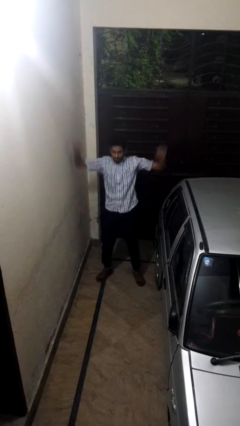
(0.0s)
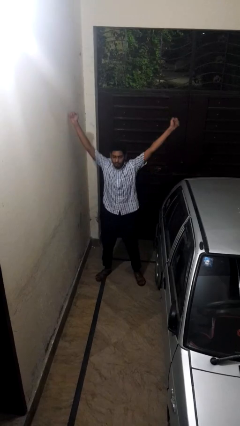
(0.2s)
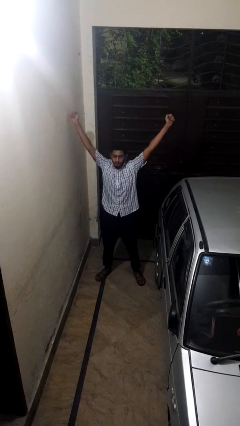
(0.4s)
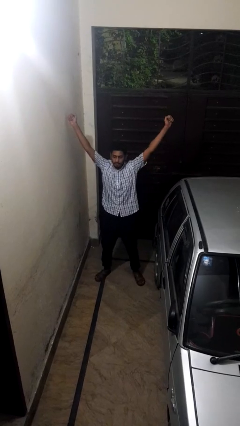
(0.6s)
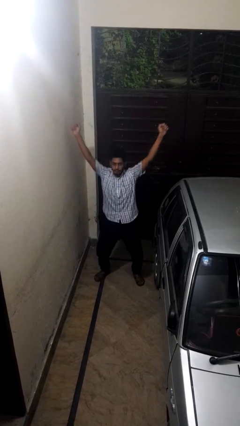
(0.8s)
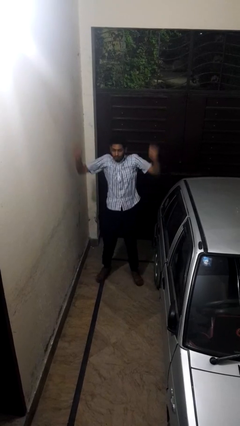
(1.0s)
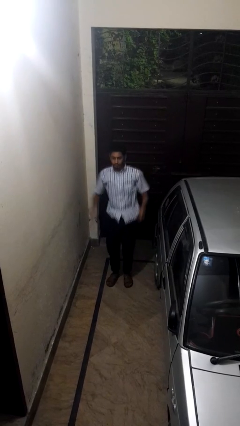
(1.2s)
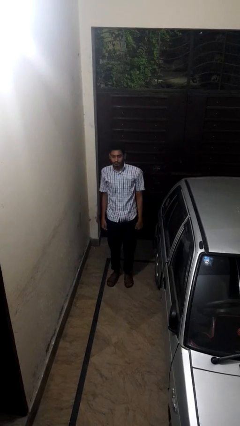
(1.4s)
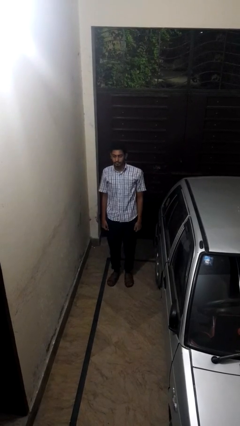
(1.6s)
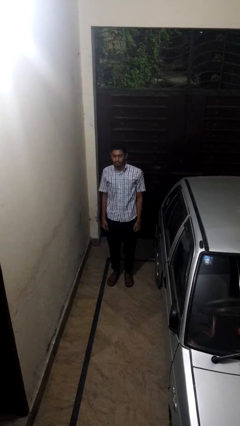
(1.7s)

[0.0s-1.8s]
person exercises with jumping jacks

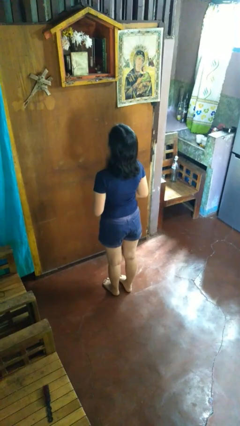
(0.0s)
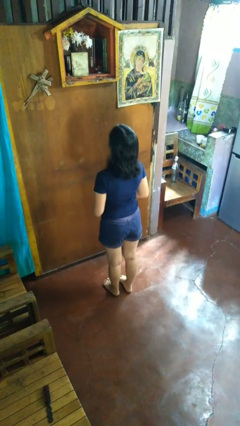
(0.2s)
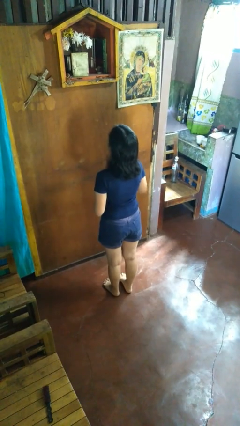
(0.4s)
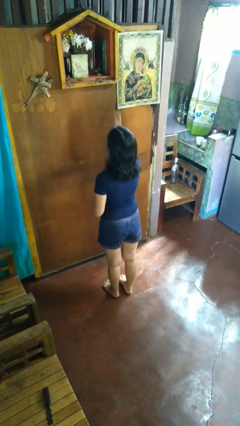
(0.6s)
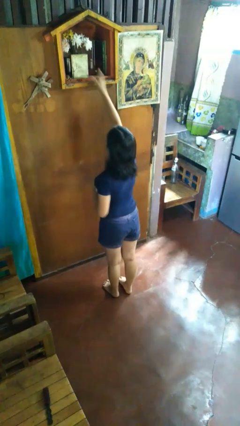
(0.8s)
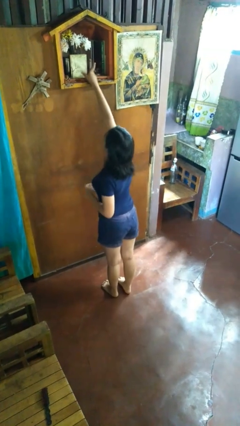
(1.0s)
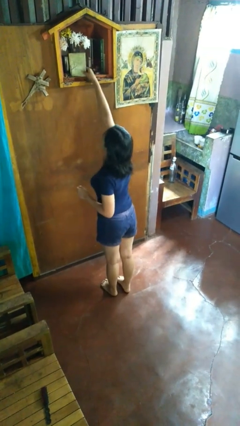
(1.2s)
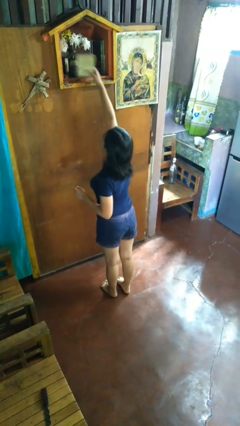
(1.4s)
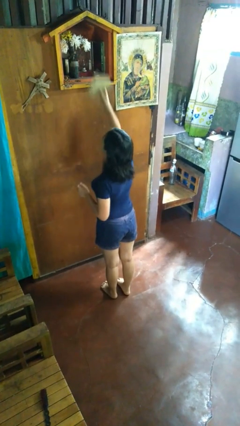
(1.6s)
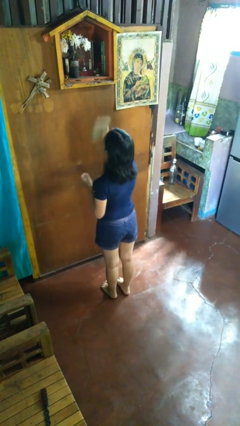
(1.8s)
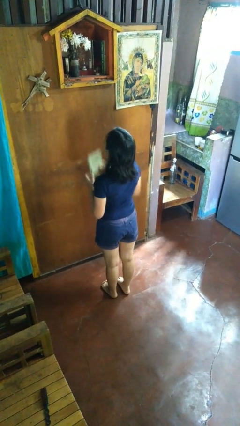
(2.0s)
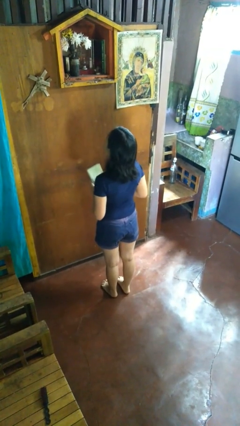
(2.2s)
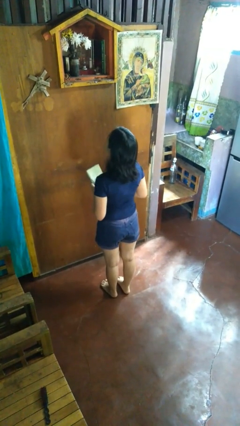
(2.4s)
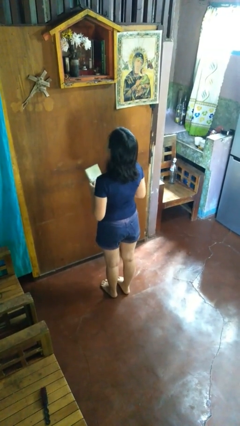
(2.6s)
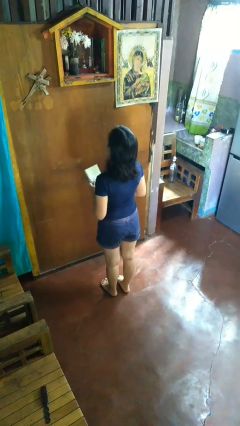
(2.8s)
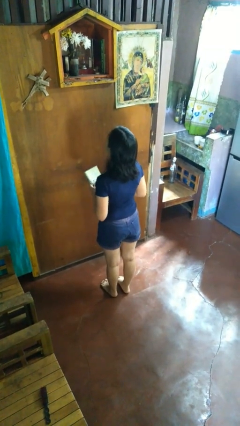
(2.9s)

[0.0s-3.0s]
person picks up object from shelf

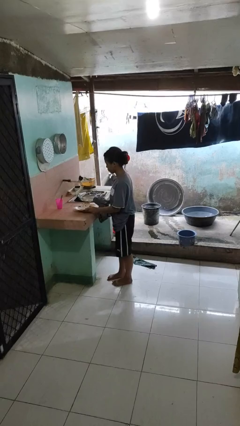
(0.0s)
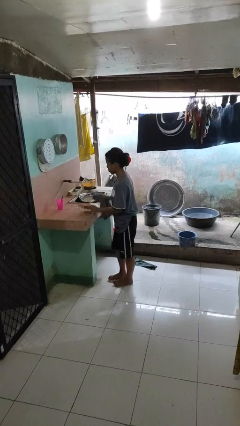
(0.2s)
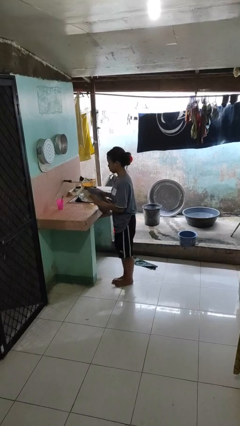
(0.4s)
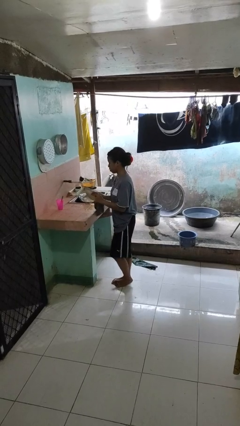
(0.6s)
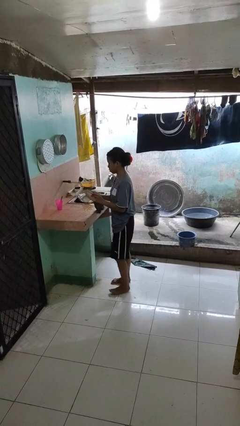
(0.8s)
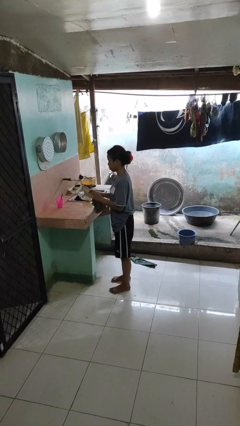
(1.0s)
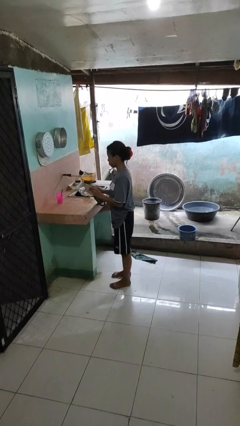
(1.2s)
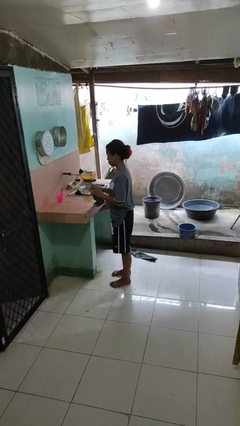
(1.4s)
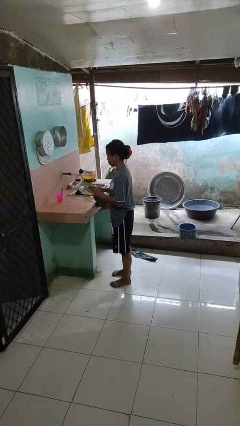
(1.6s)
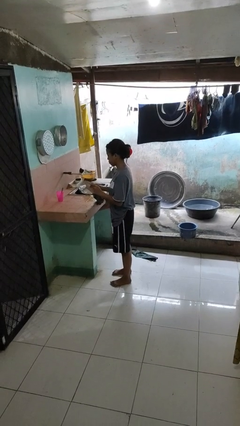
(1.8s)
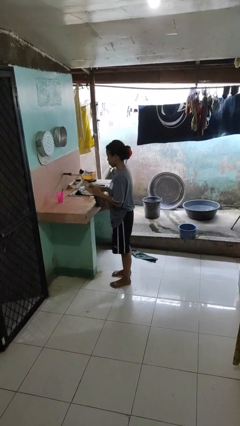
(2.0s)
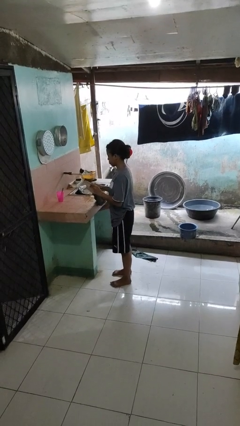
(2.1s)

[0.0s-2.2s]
person dries dish

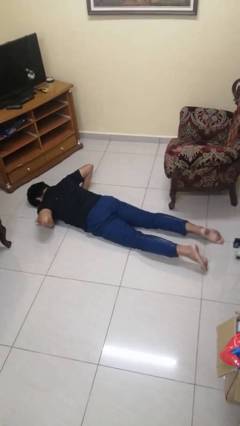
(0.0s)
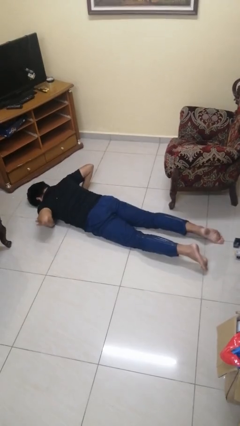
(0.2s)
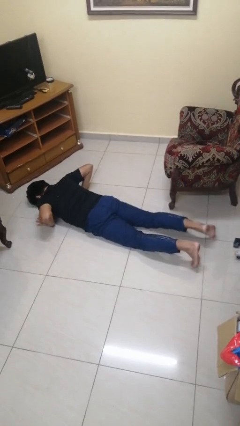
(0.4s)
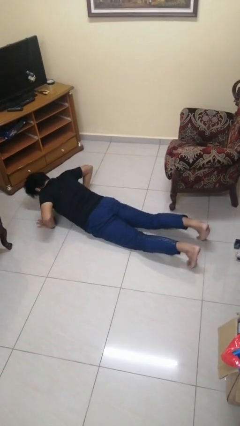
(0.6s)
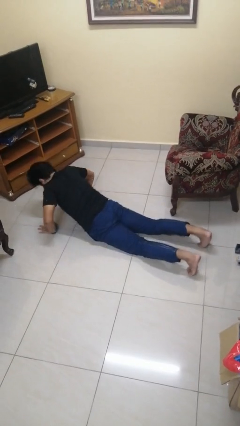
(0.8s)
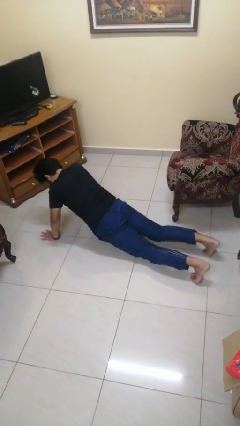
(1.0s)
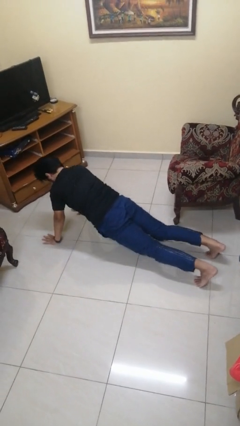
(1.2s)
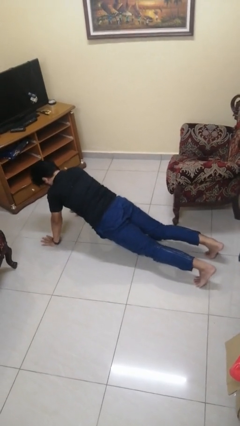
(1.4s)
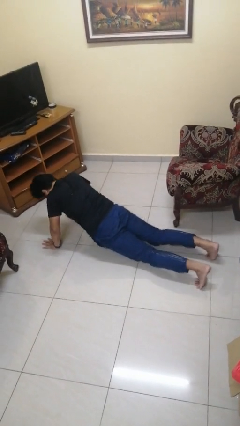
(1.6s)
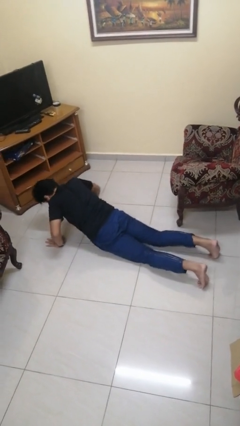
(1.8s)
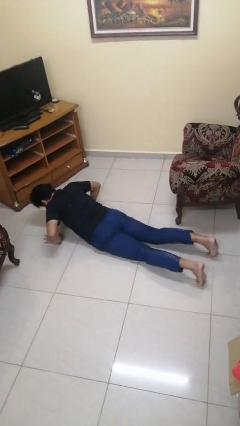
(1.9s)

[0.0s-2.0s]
person exercises with pushup

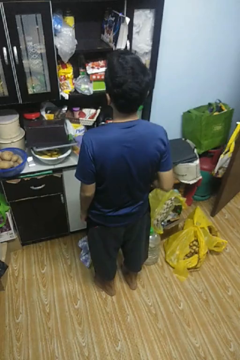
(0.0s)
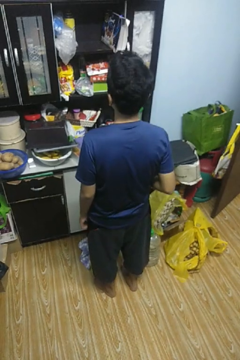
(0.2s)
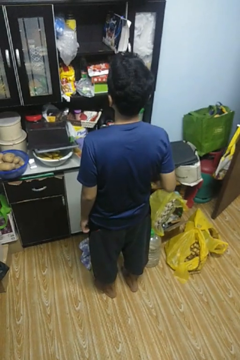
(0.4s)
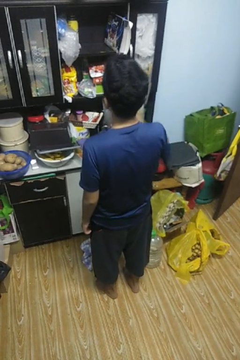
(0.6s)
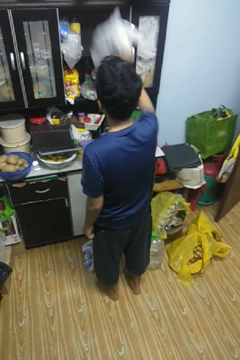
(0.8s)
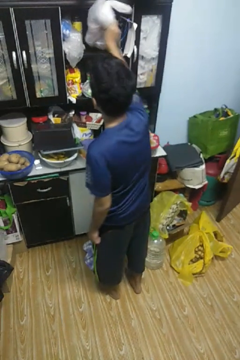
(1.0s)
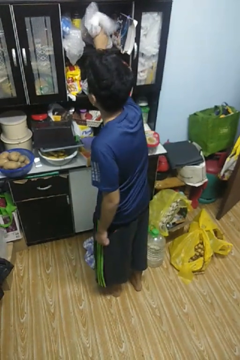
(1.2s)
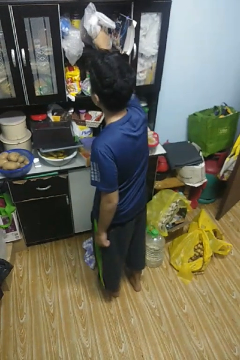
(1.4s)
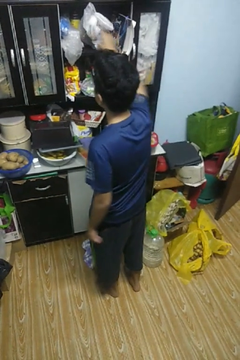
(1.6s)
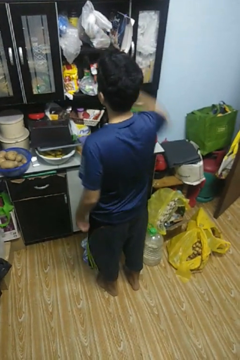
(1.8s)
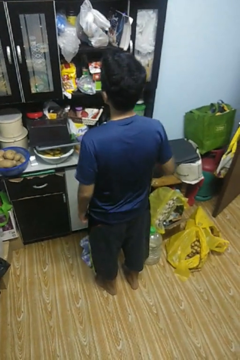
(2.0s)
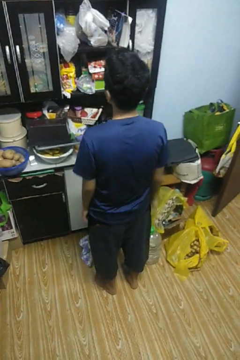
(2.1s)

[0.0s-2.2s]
person loads groceries into cabinet

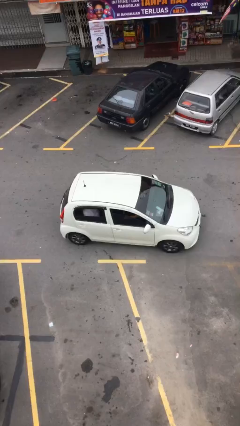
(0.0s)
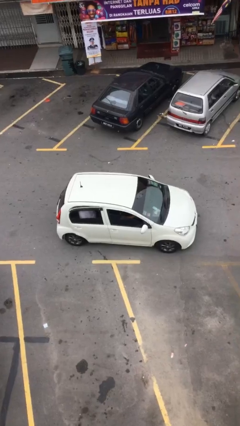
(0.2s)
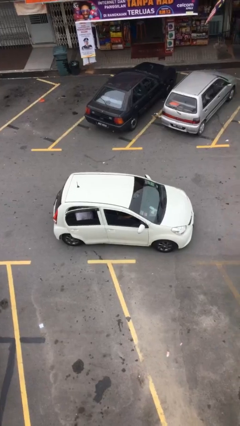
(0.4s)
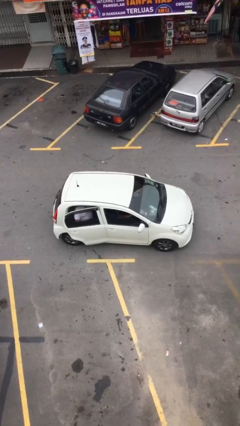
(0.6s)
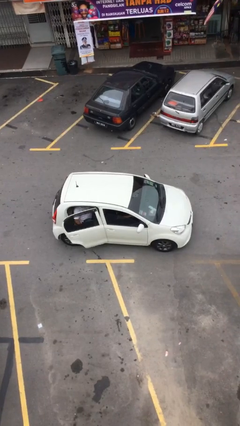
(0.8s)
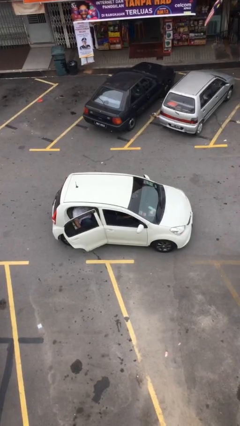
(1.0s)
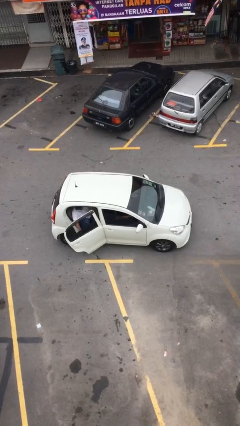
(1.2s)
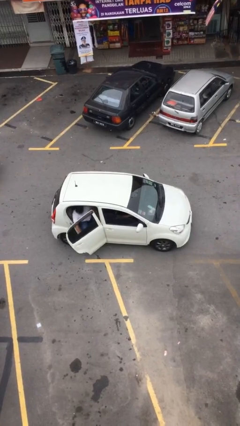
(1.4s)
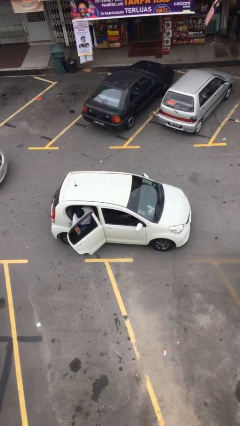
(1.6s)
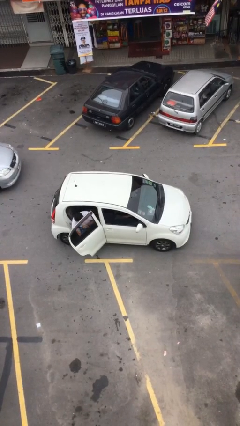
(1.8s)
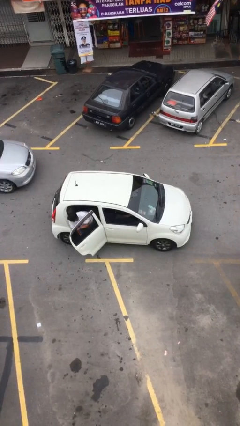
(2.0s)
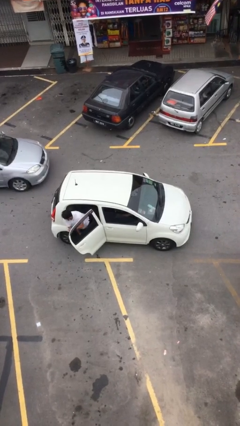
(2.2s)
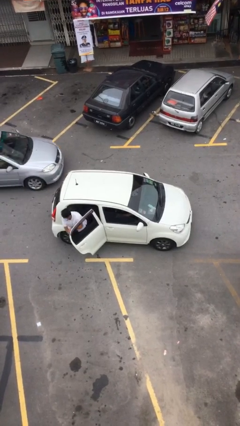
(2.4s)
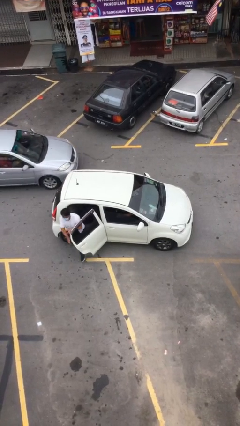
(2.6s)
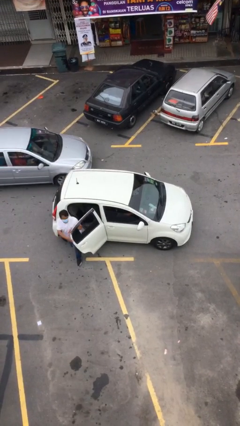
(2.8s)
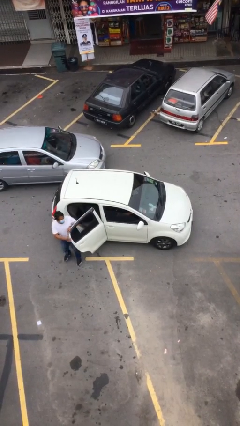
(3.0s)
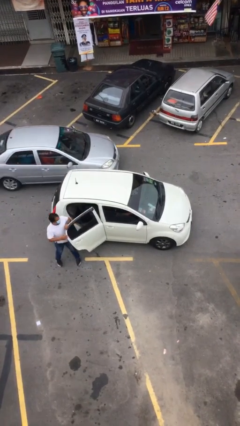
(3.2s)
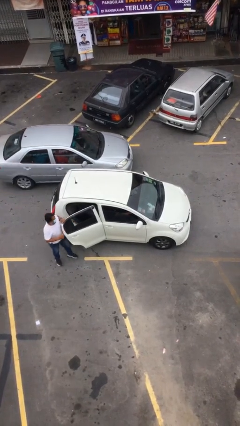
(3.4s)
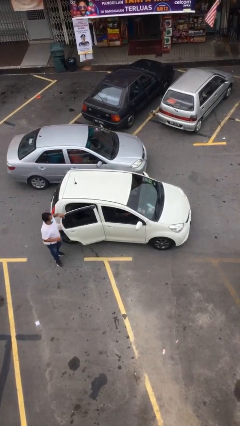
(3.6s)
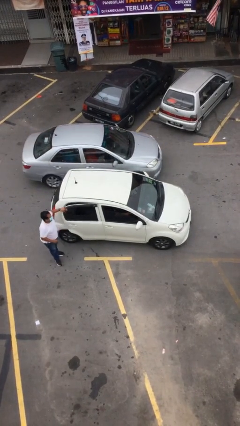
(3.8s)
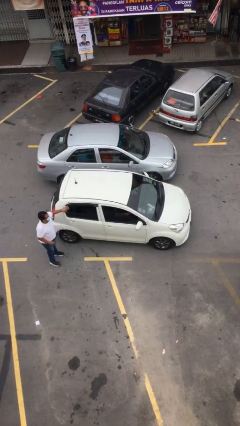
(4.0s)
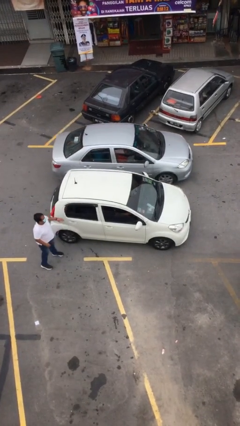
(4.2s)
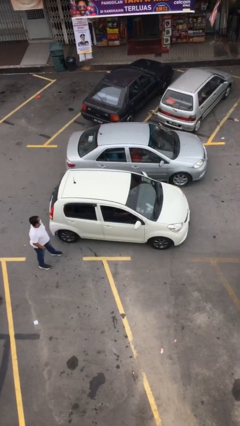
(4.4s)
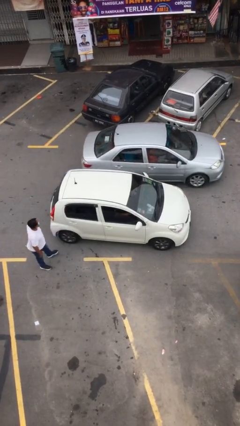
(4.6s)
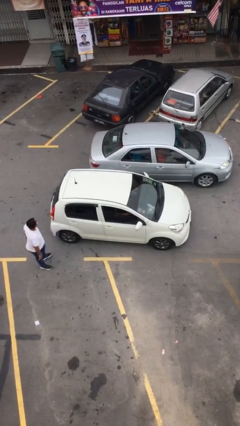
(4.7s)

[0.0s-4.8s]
car drops off person

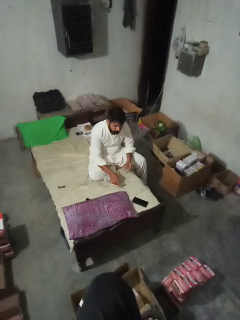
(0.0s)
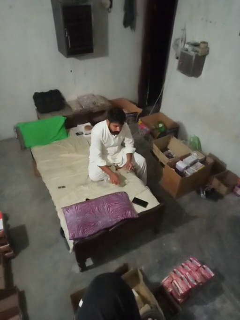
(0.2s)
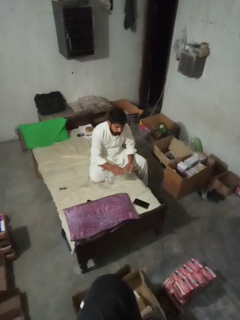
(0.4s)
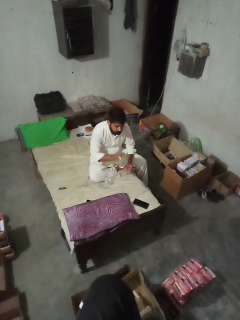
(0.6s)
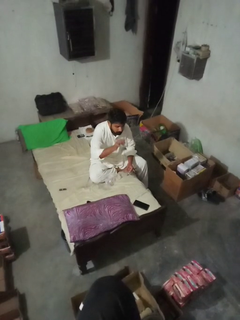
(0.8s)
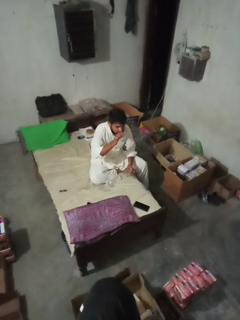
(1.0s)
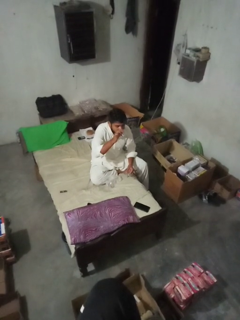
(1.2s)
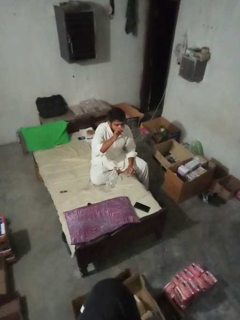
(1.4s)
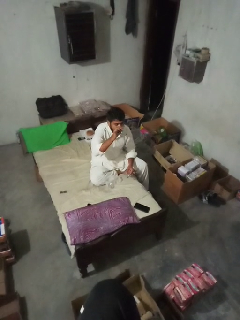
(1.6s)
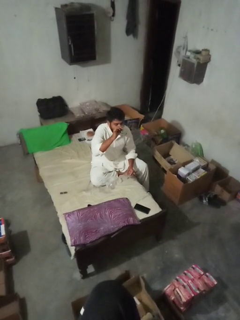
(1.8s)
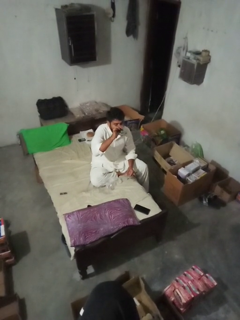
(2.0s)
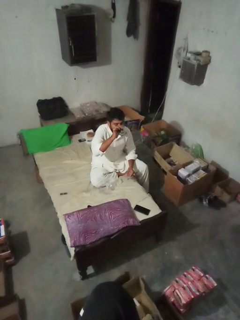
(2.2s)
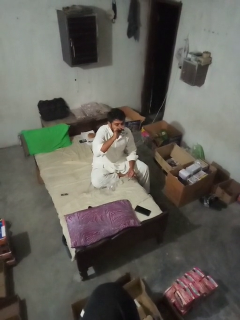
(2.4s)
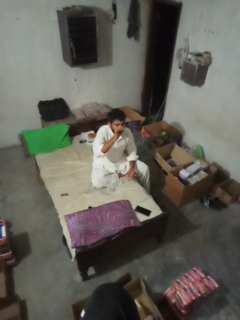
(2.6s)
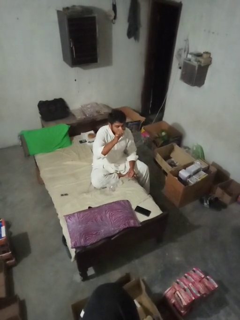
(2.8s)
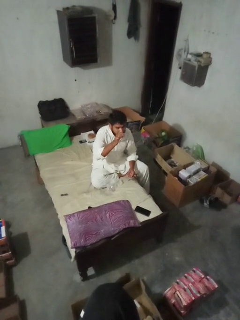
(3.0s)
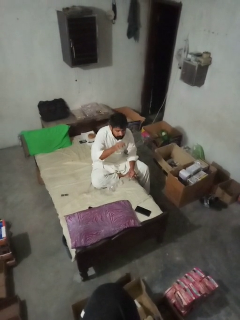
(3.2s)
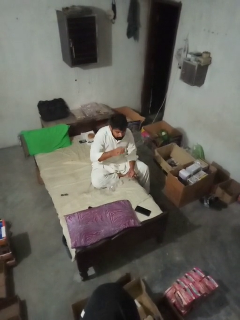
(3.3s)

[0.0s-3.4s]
person drinks from cup
